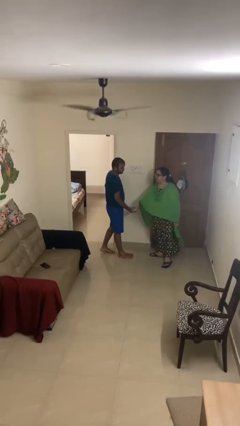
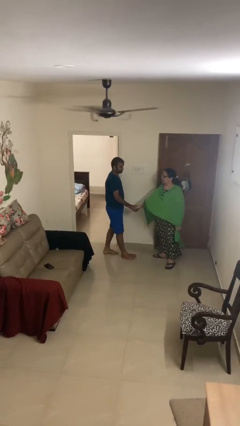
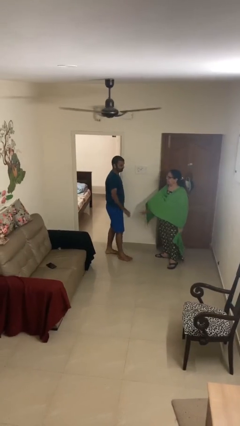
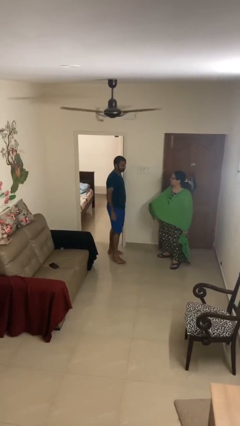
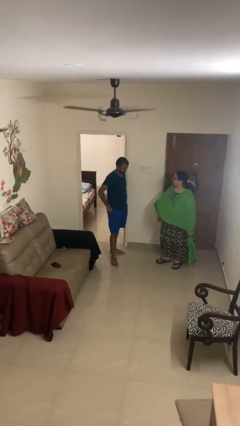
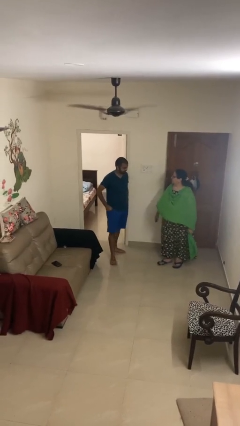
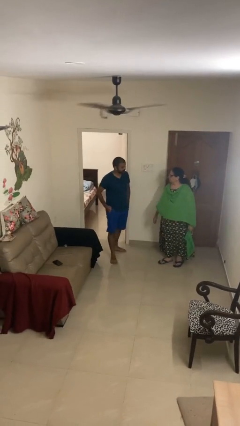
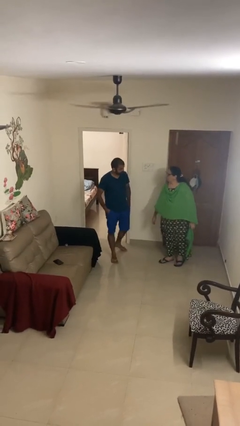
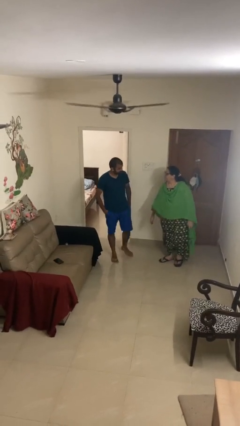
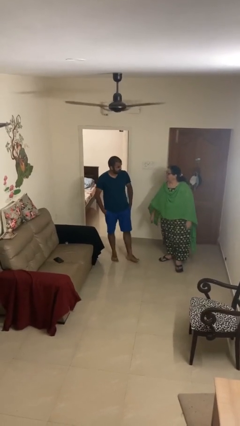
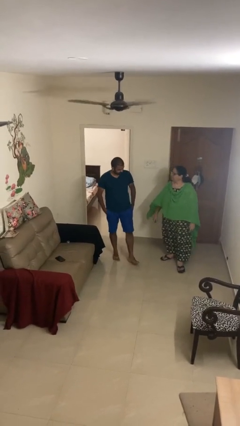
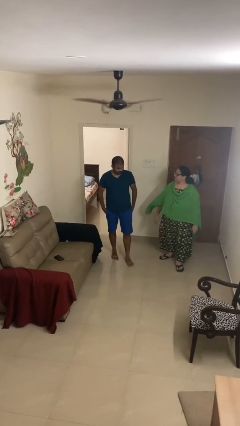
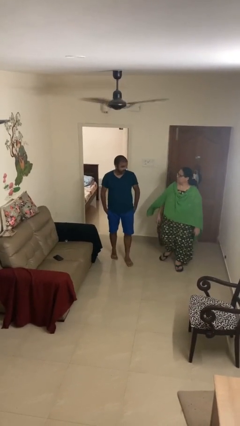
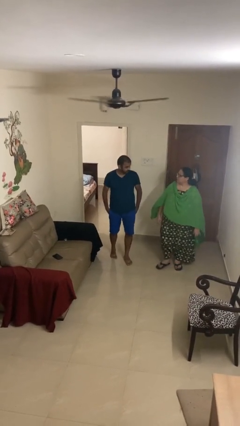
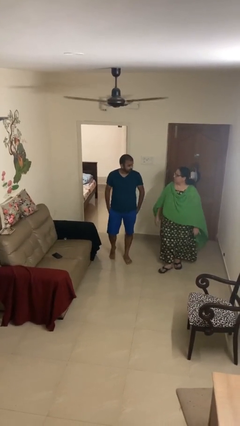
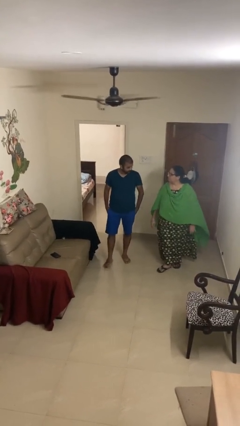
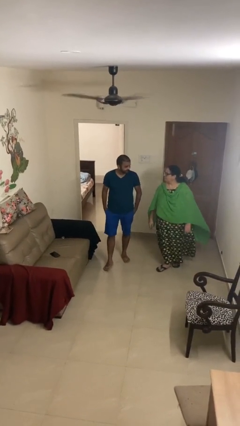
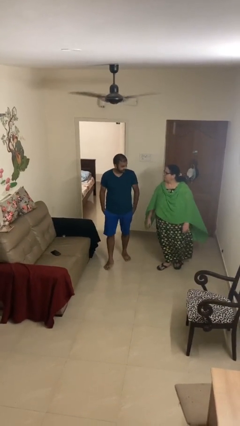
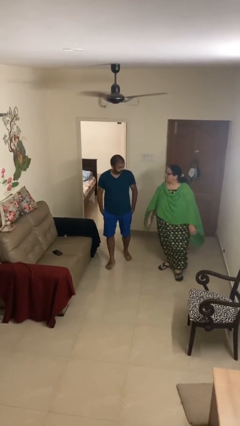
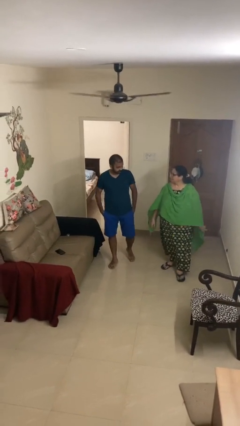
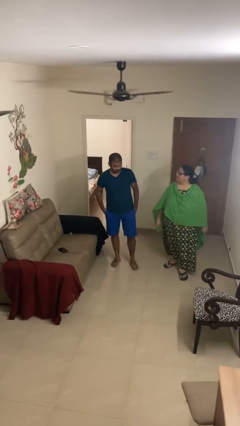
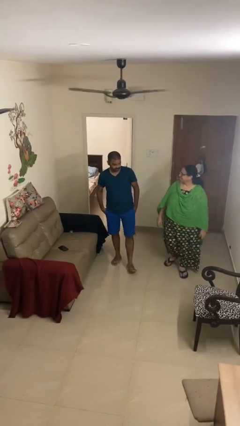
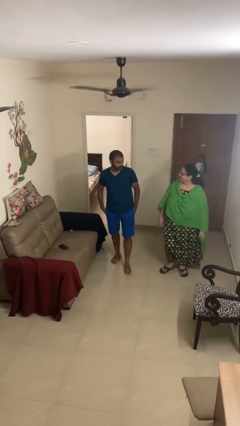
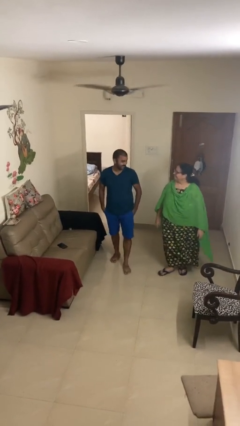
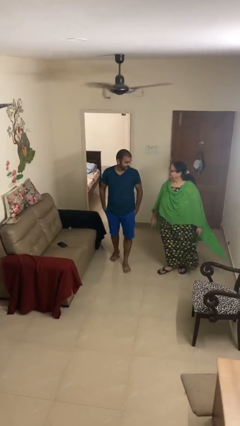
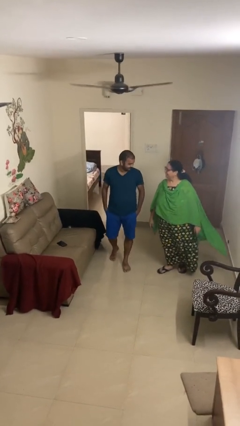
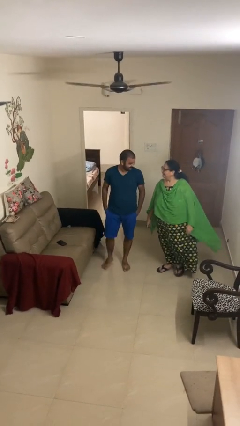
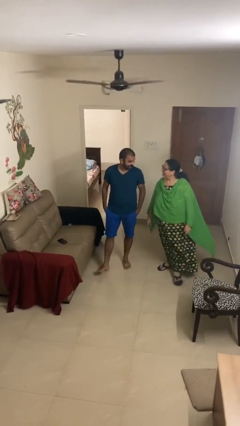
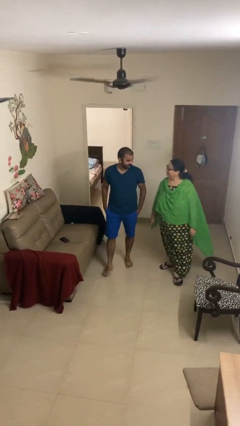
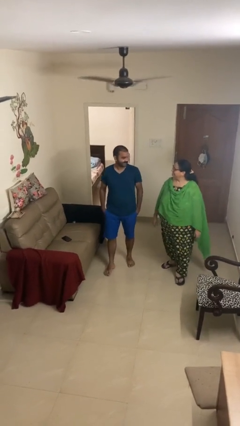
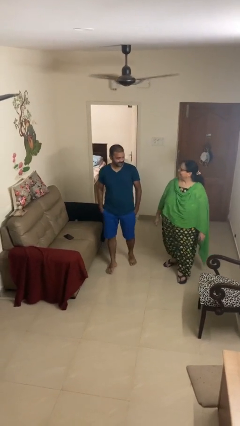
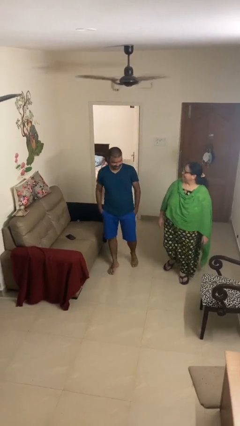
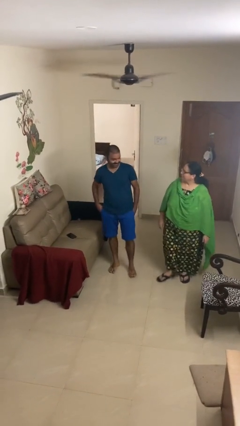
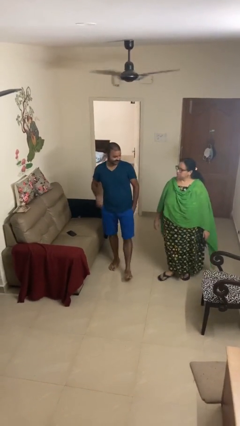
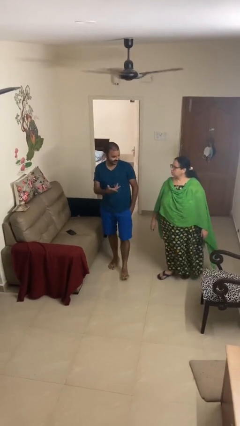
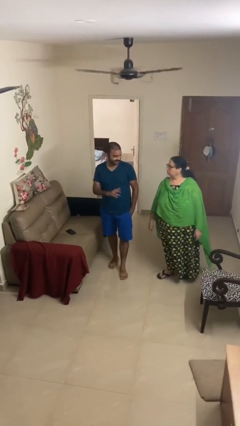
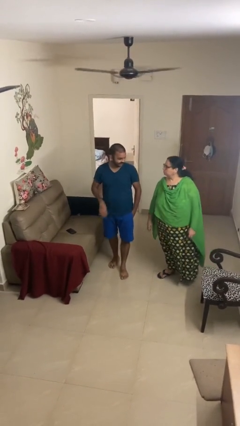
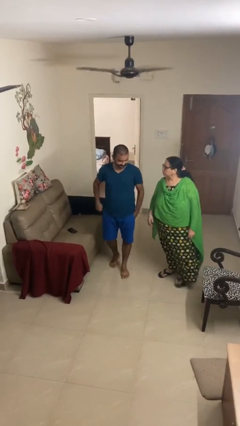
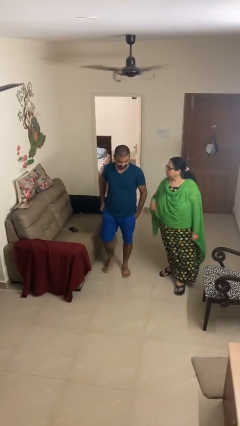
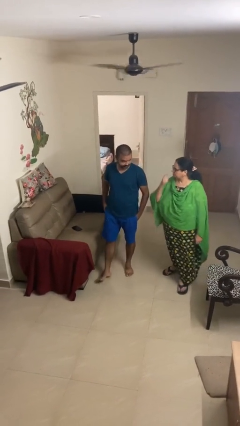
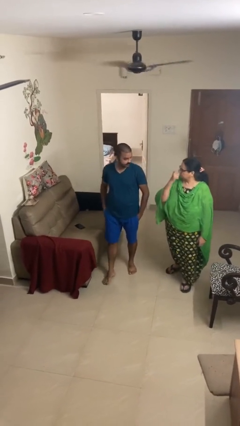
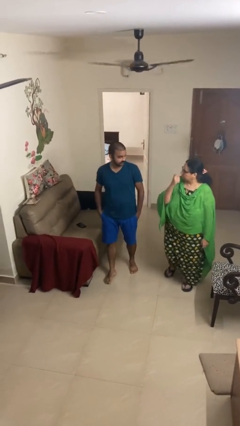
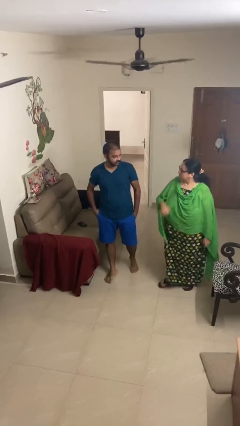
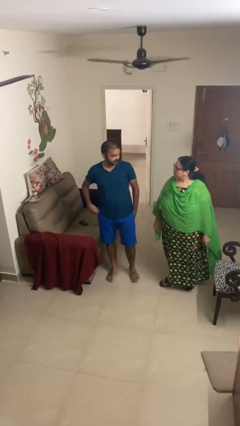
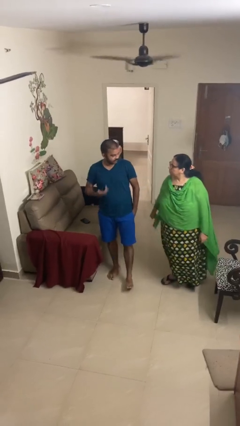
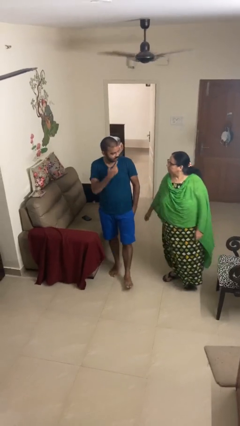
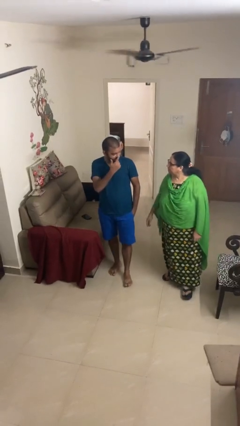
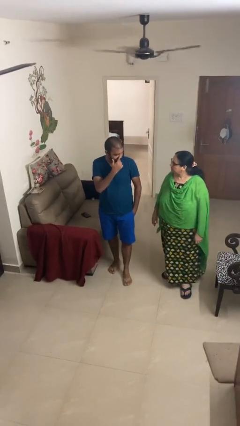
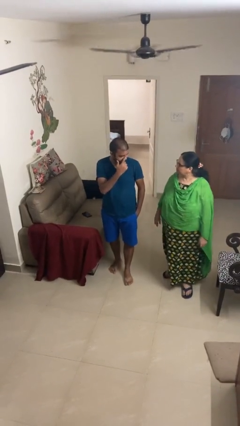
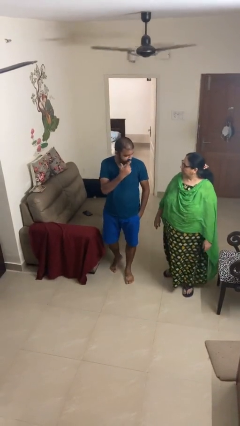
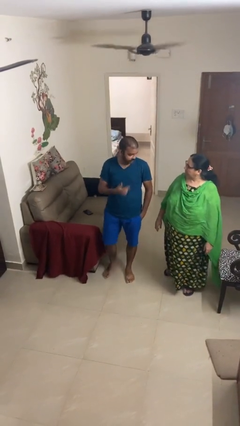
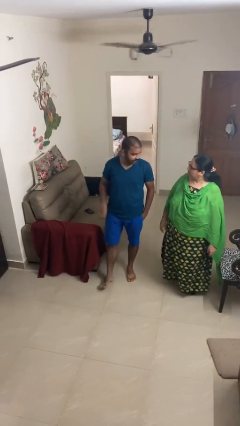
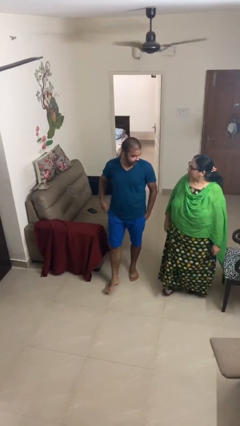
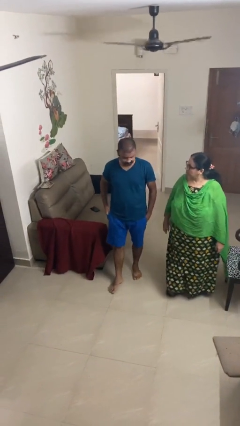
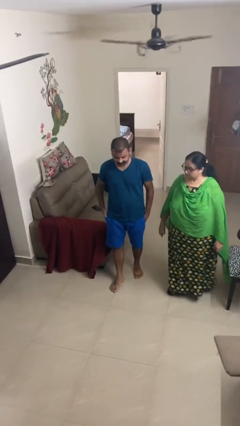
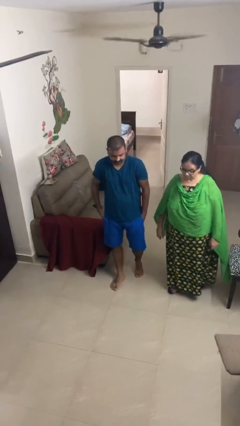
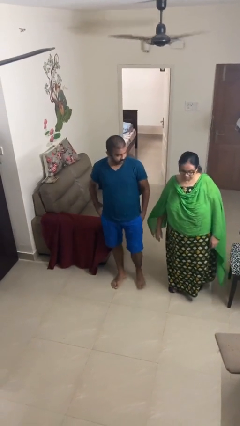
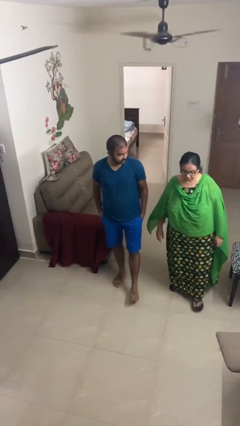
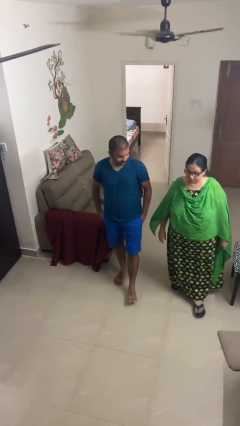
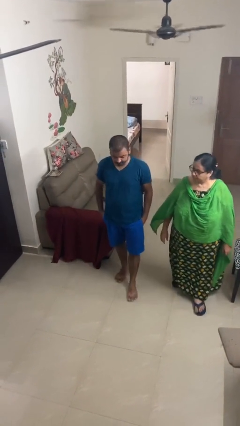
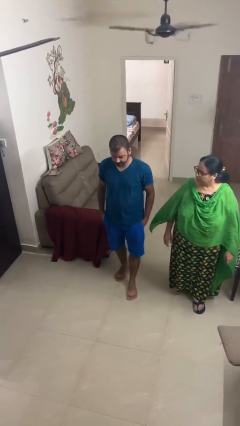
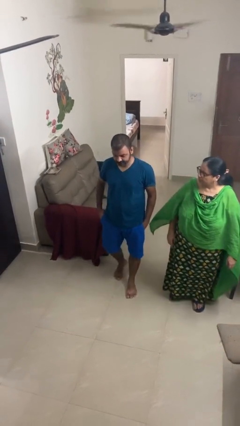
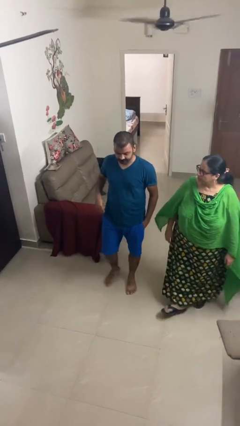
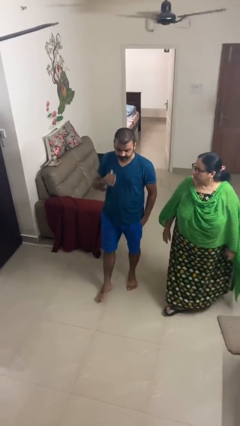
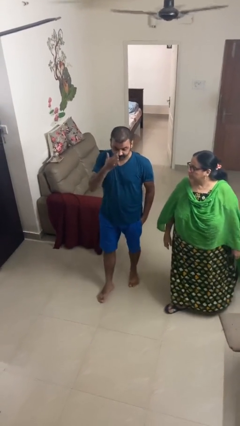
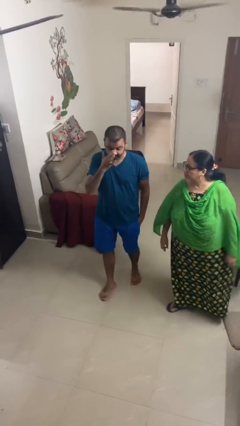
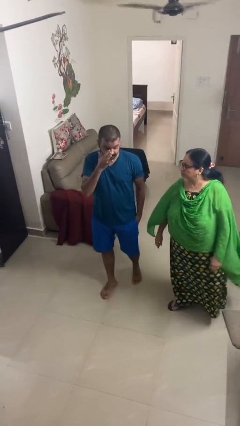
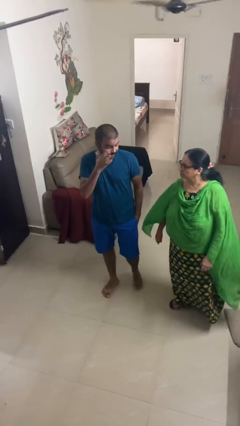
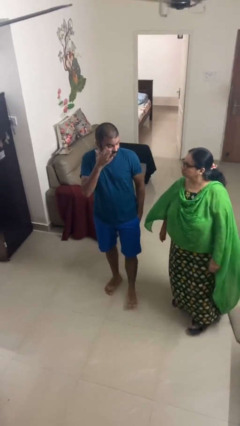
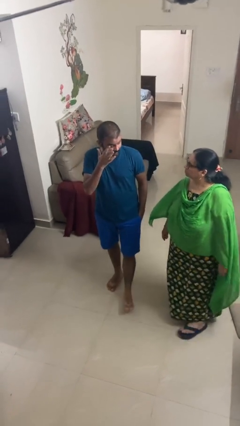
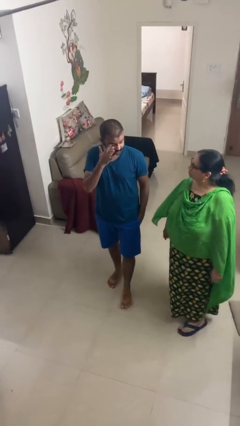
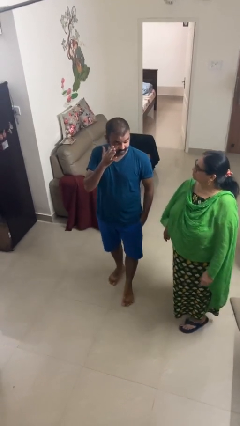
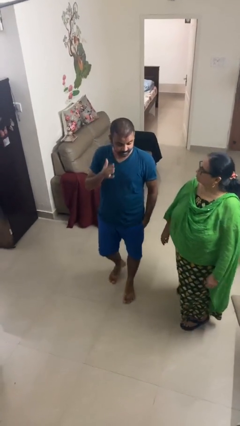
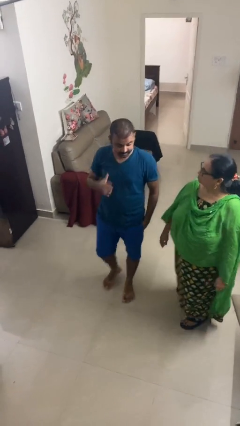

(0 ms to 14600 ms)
person talks to person

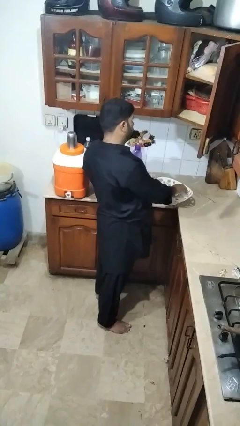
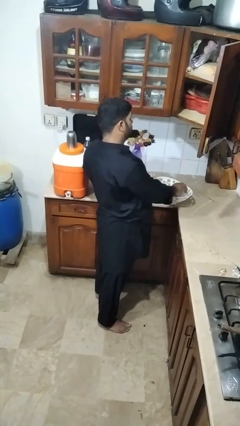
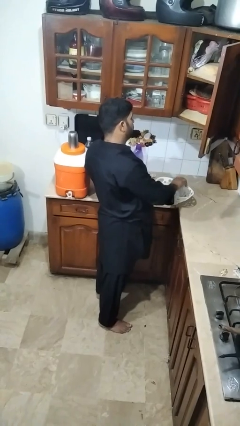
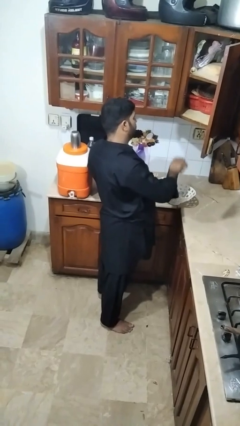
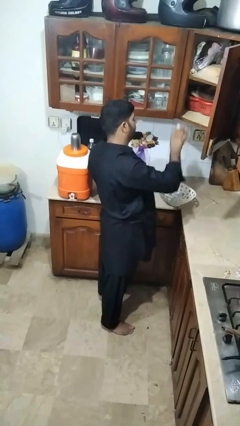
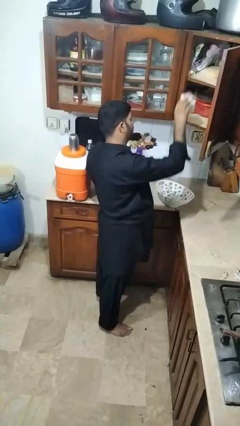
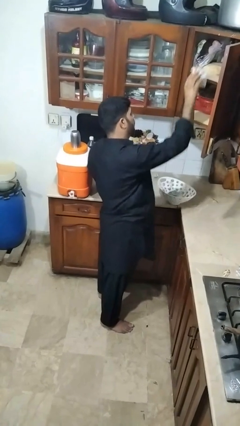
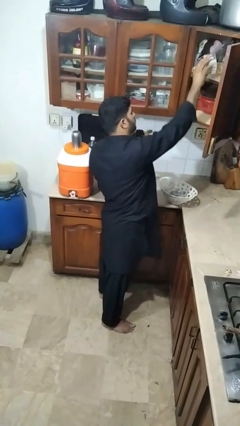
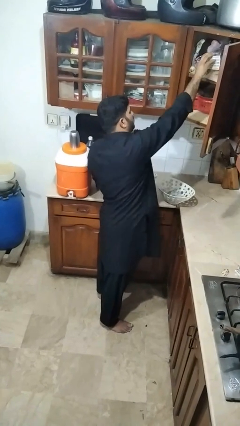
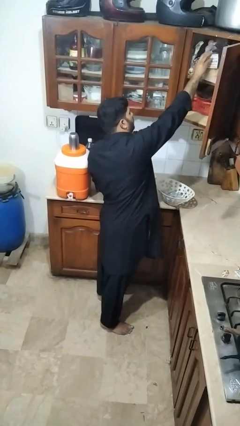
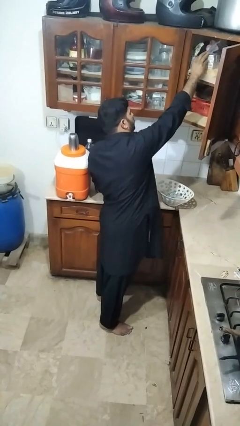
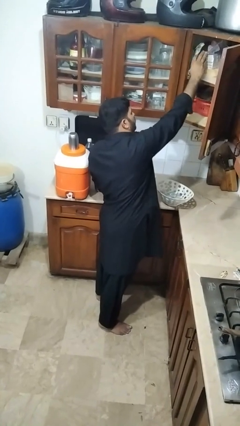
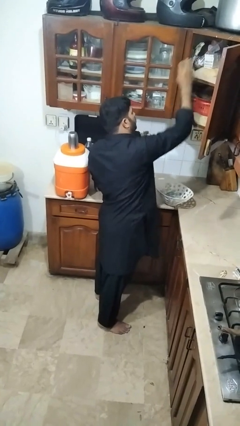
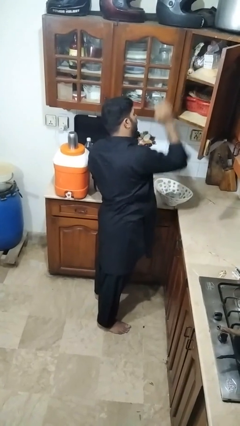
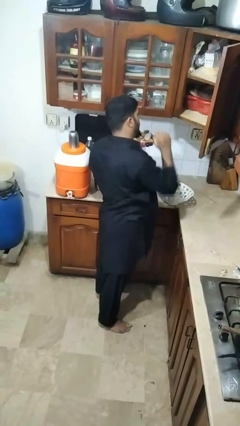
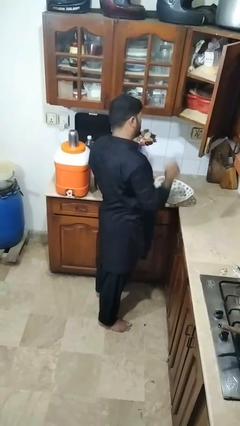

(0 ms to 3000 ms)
person loads groceries into cabinet

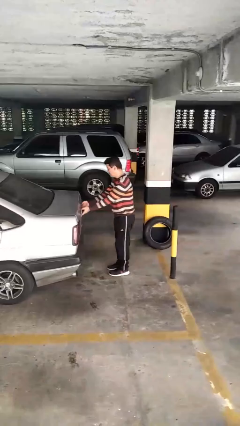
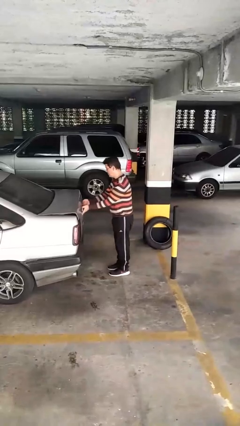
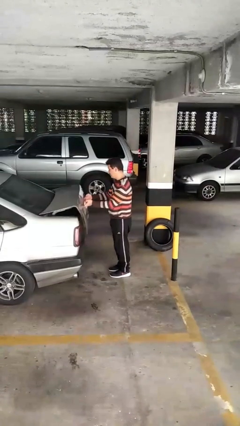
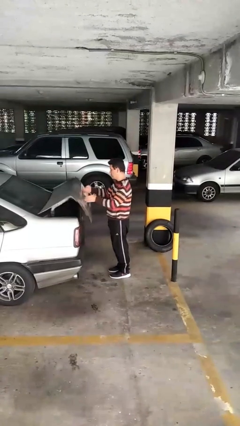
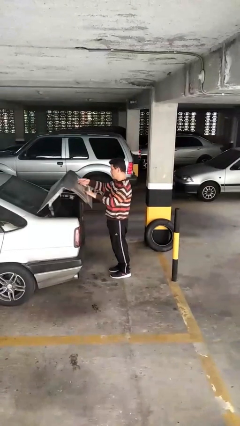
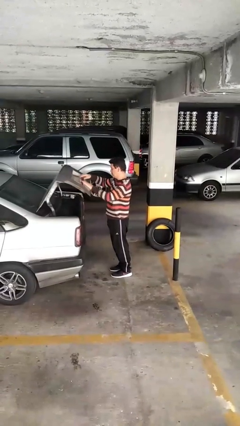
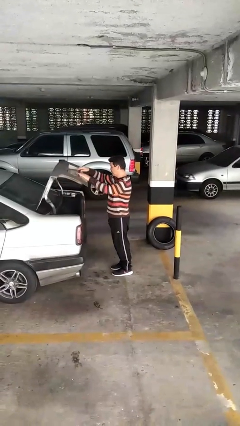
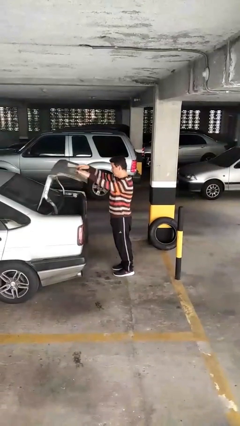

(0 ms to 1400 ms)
person opens car trunk
